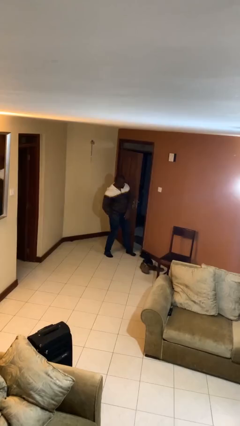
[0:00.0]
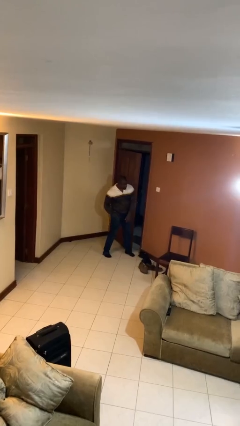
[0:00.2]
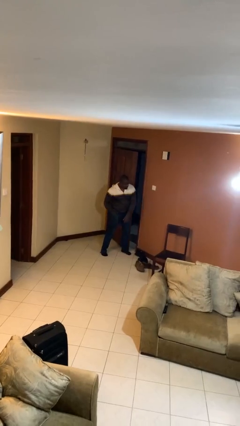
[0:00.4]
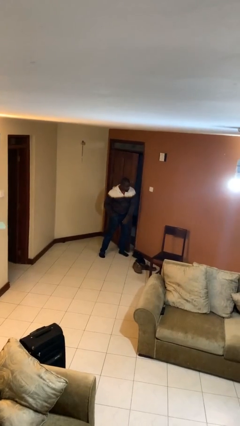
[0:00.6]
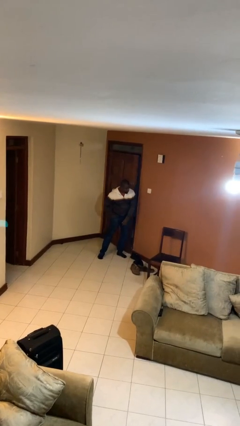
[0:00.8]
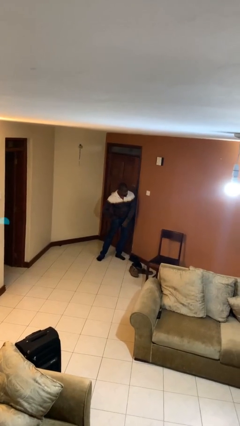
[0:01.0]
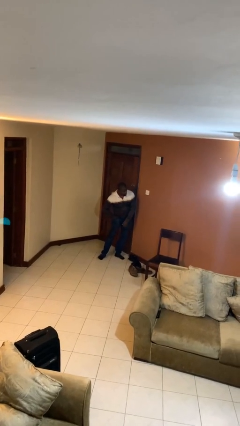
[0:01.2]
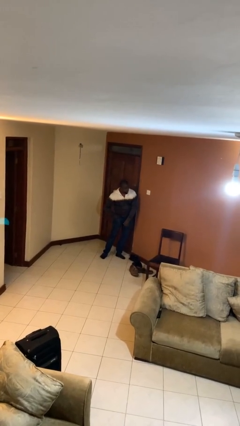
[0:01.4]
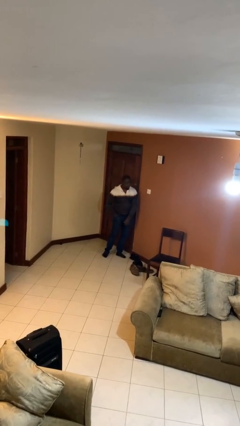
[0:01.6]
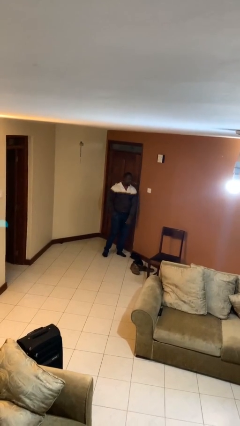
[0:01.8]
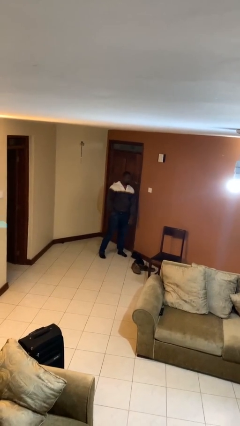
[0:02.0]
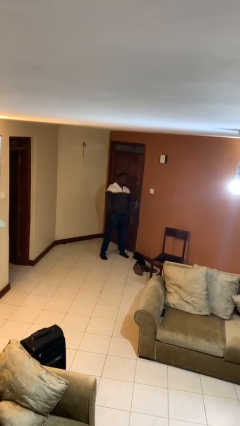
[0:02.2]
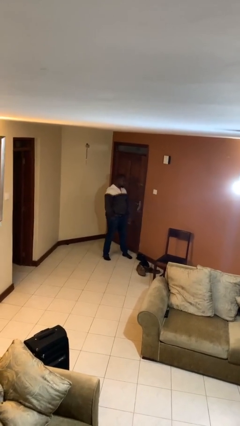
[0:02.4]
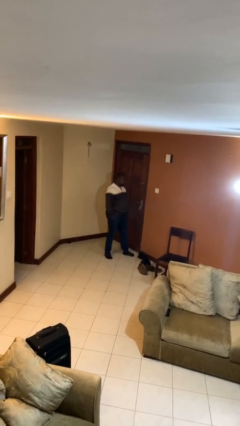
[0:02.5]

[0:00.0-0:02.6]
person closes door with hip

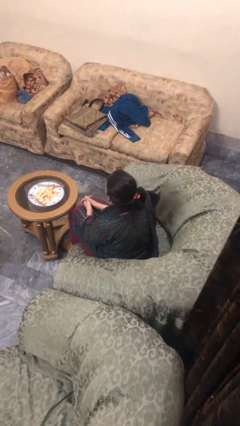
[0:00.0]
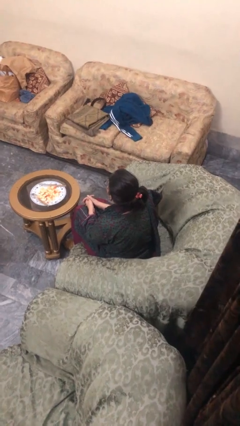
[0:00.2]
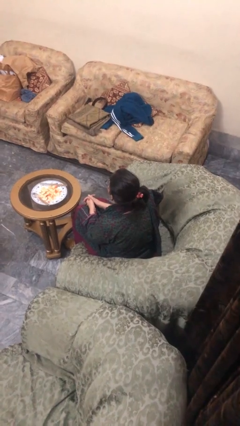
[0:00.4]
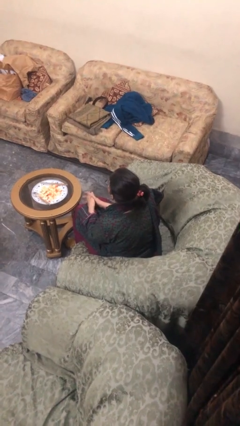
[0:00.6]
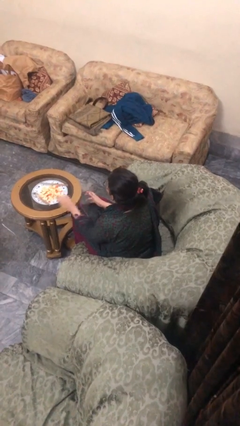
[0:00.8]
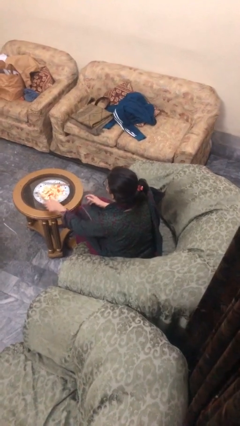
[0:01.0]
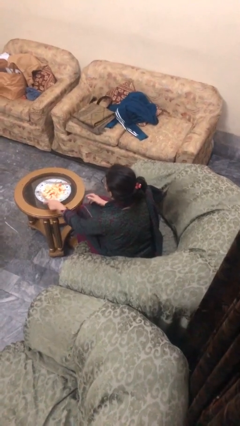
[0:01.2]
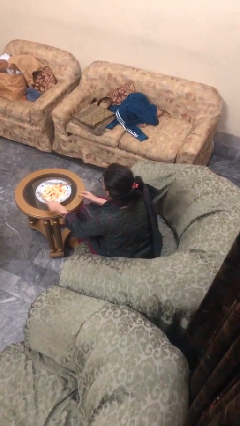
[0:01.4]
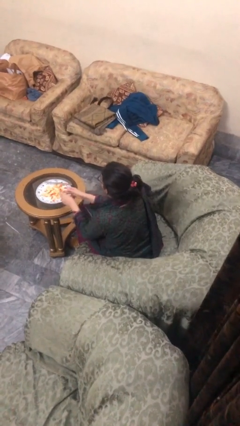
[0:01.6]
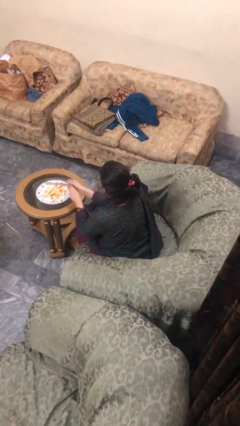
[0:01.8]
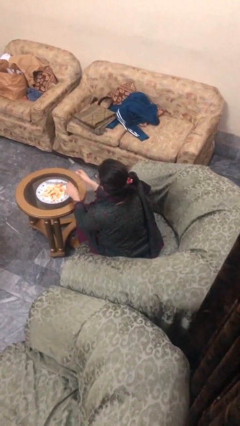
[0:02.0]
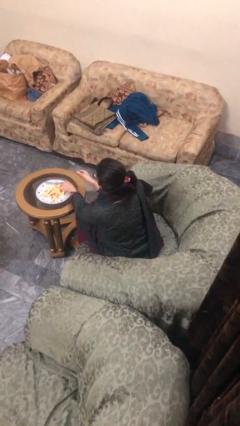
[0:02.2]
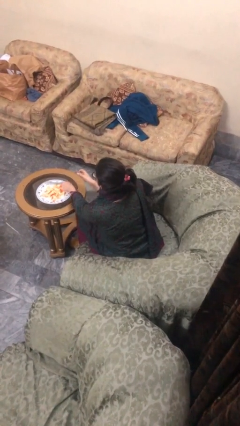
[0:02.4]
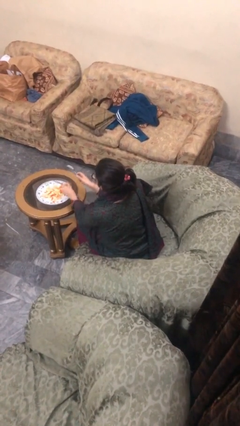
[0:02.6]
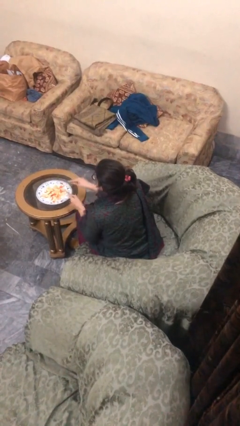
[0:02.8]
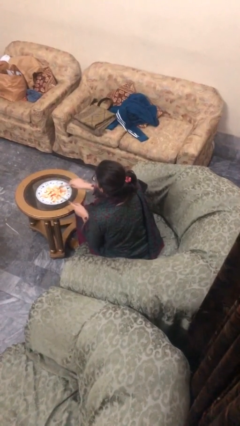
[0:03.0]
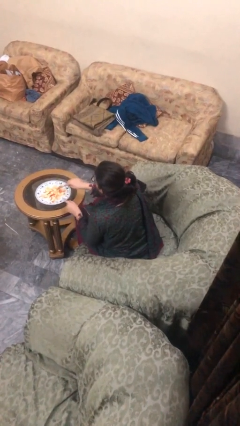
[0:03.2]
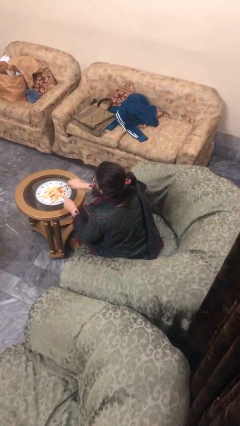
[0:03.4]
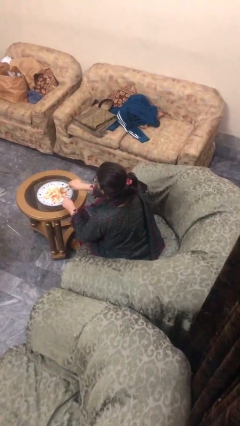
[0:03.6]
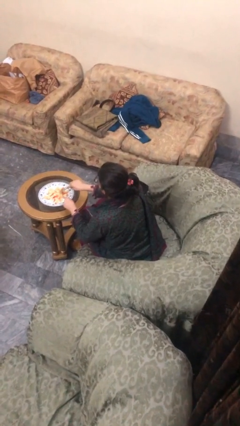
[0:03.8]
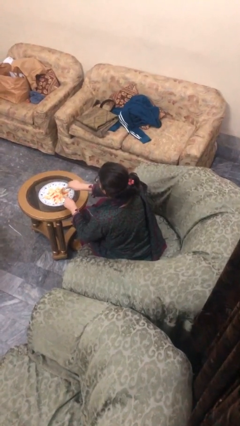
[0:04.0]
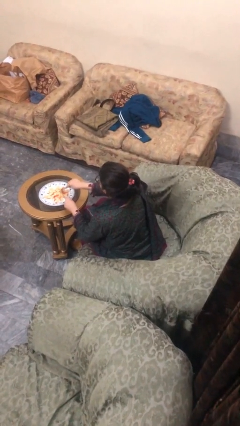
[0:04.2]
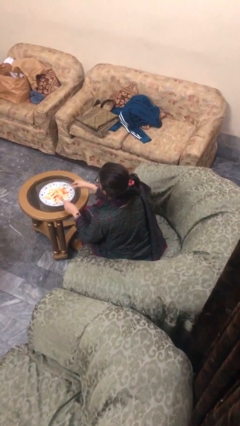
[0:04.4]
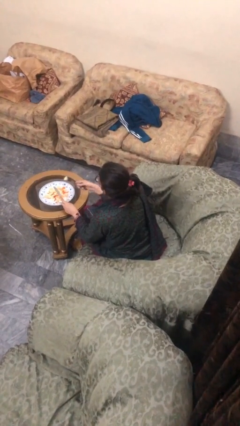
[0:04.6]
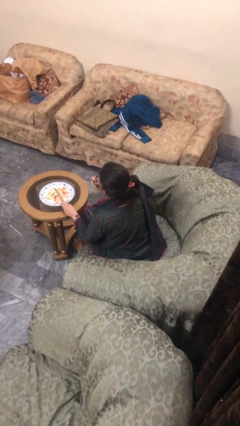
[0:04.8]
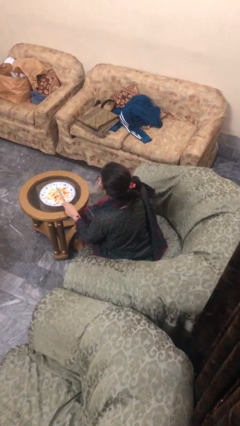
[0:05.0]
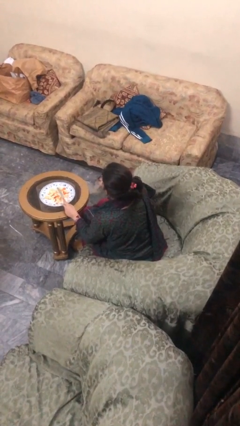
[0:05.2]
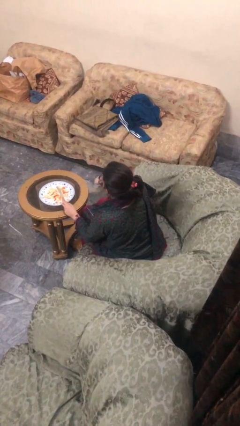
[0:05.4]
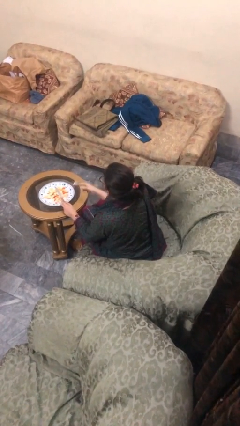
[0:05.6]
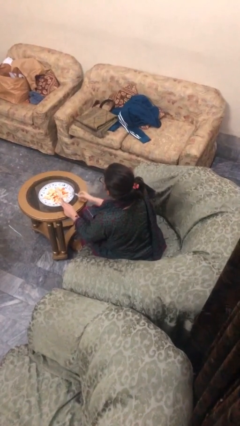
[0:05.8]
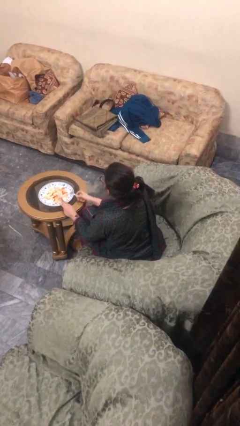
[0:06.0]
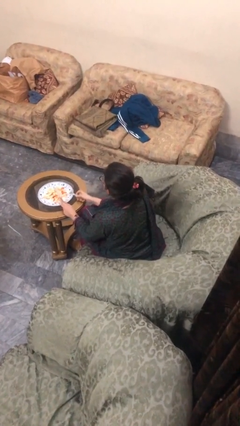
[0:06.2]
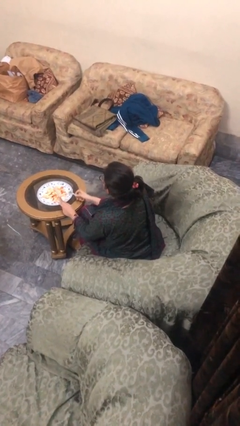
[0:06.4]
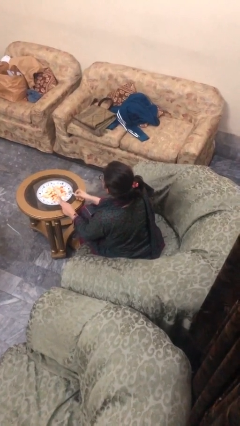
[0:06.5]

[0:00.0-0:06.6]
person eats with utensil

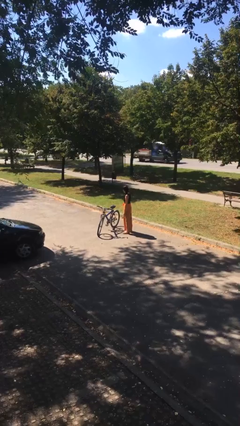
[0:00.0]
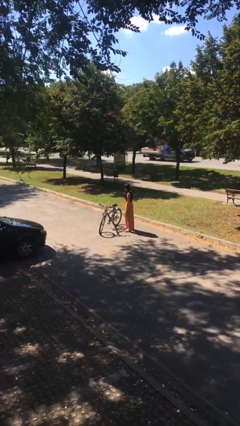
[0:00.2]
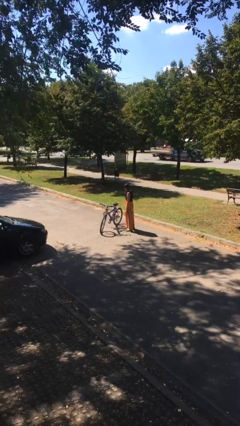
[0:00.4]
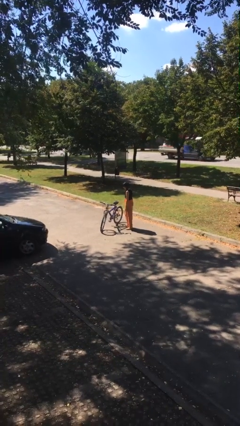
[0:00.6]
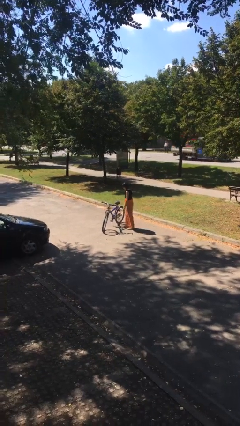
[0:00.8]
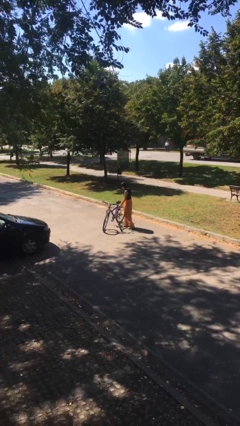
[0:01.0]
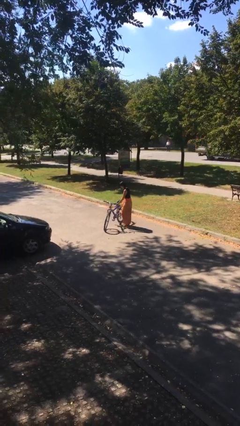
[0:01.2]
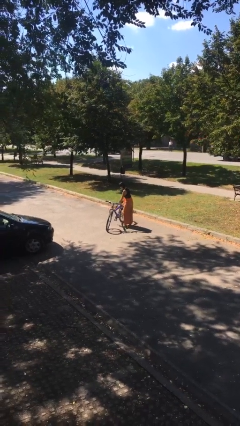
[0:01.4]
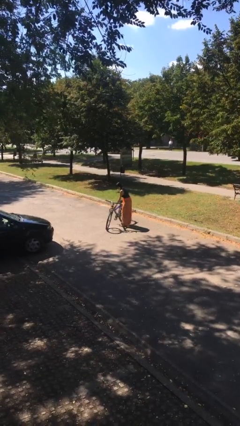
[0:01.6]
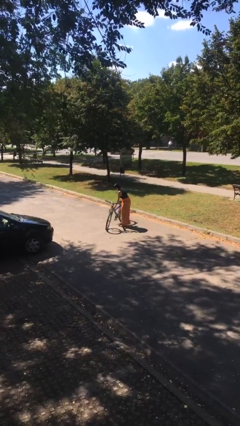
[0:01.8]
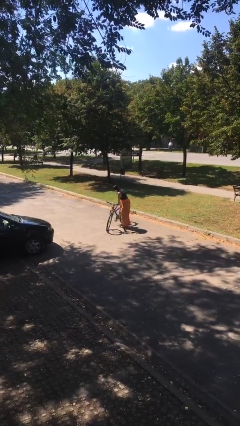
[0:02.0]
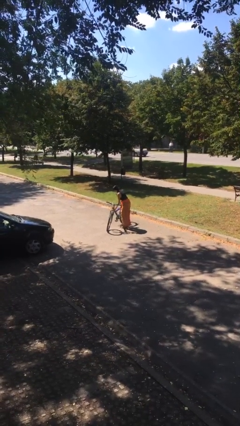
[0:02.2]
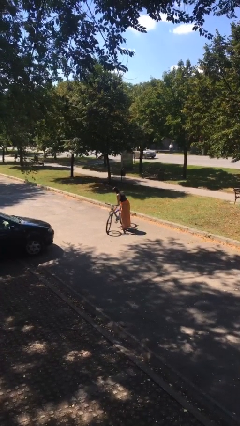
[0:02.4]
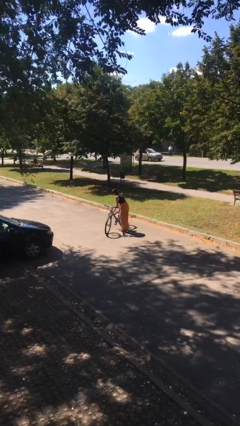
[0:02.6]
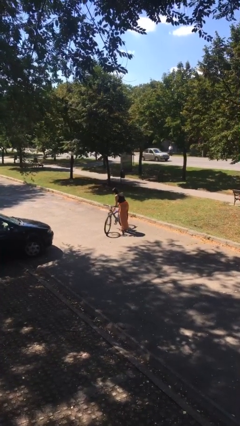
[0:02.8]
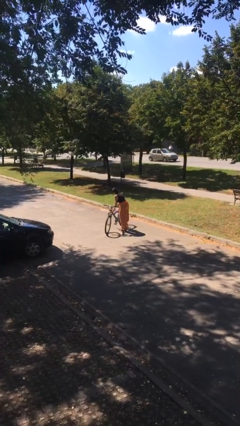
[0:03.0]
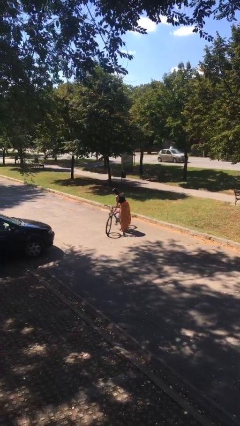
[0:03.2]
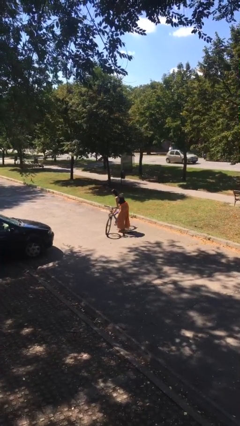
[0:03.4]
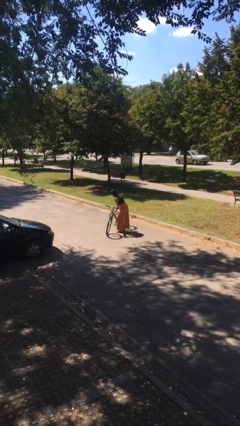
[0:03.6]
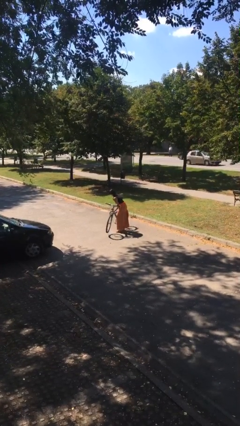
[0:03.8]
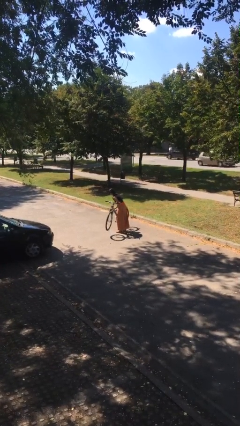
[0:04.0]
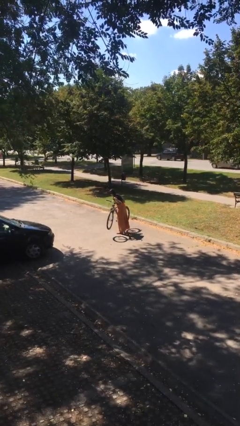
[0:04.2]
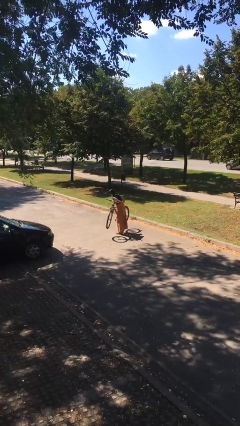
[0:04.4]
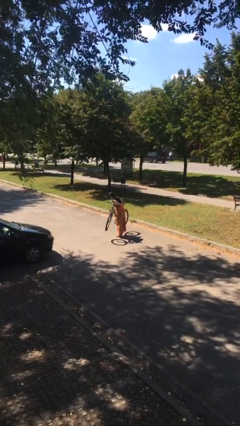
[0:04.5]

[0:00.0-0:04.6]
person picks up object from floor

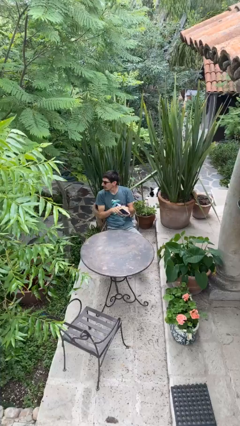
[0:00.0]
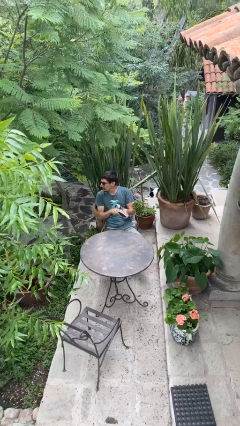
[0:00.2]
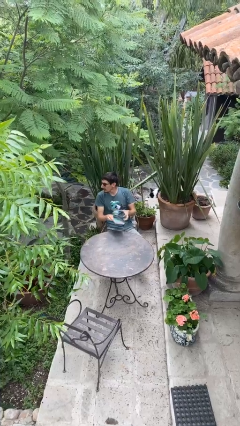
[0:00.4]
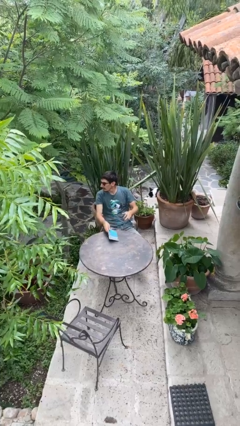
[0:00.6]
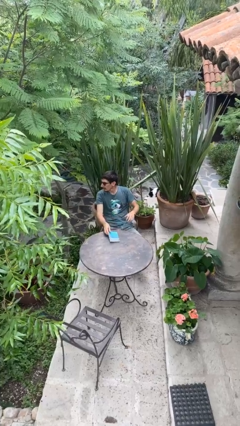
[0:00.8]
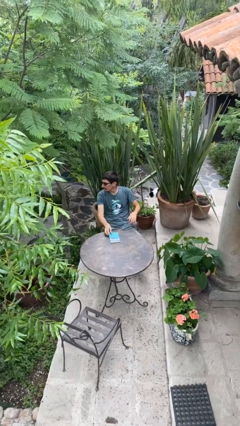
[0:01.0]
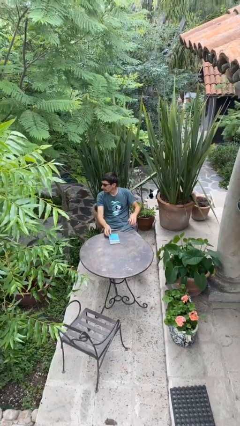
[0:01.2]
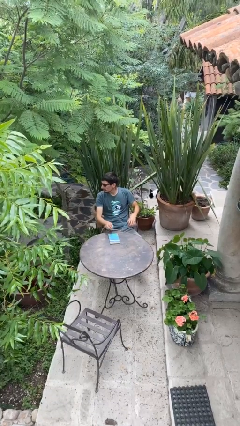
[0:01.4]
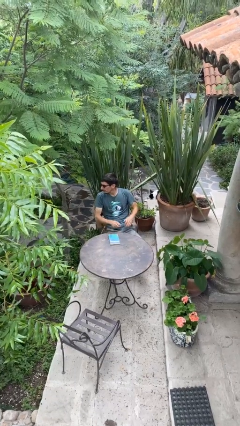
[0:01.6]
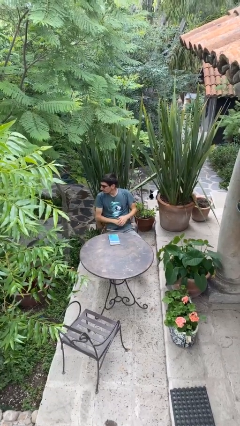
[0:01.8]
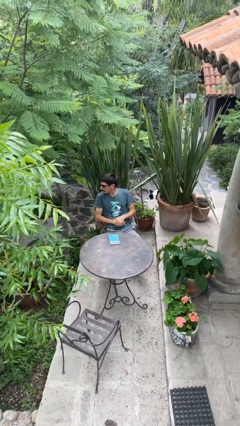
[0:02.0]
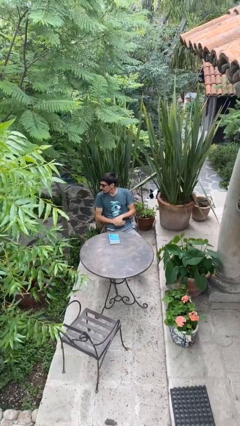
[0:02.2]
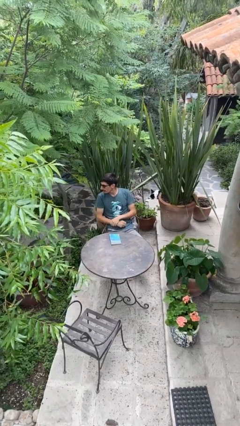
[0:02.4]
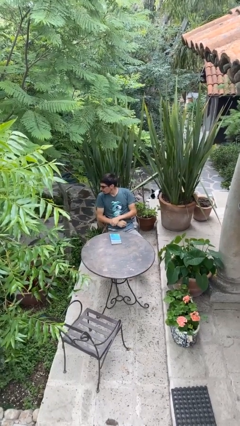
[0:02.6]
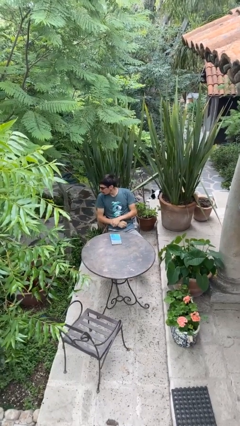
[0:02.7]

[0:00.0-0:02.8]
person puts down object on table

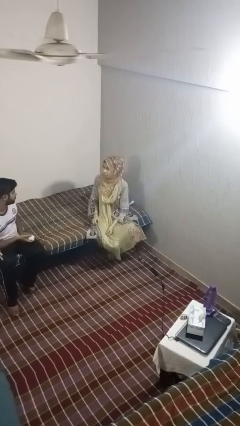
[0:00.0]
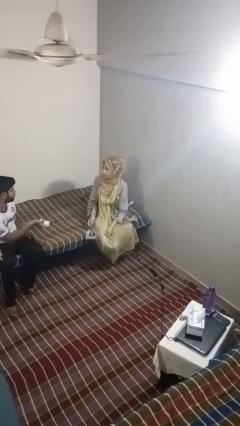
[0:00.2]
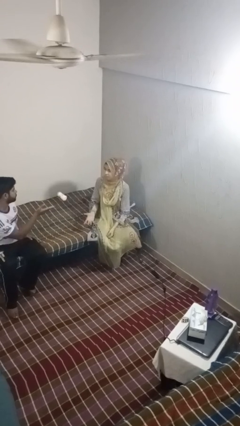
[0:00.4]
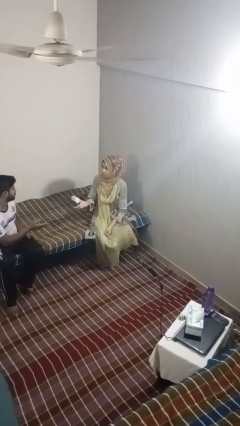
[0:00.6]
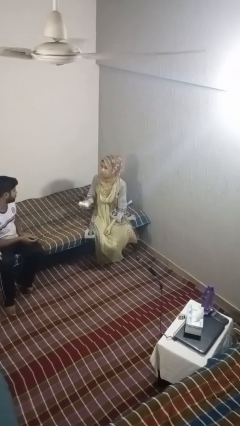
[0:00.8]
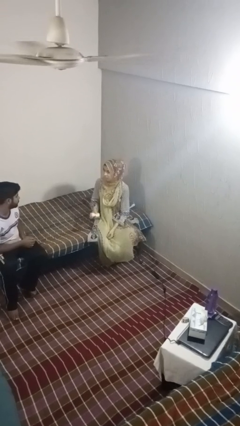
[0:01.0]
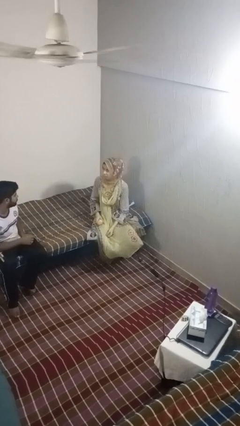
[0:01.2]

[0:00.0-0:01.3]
person catches object from person
